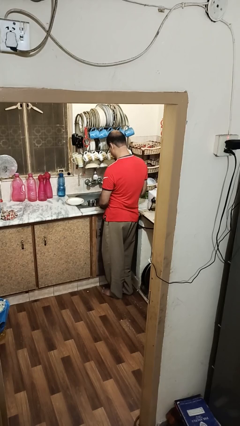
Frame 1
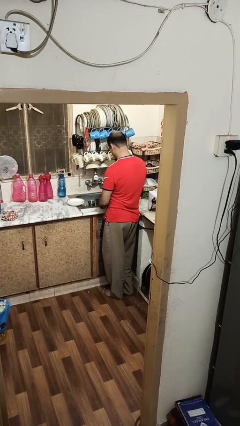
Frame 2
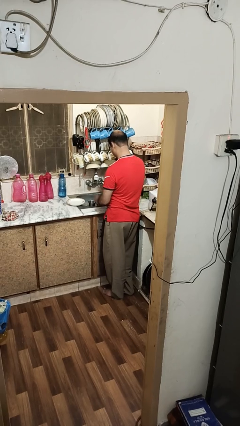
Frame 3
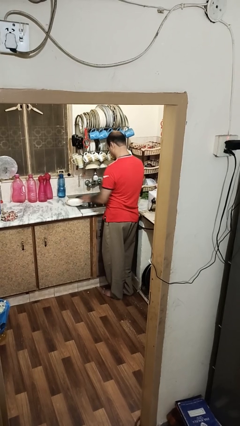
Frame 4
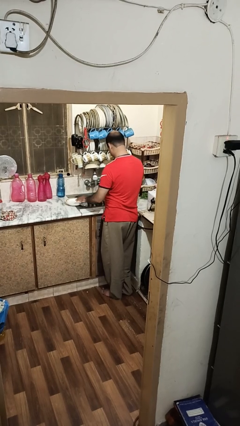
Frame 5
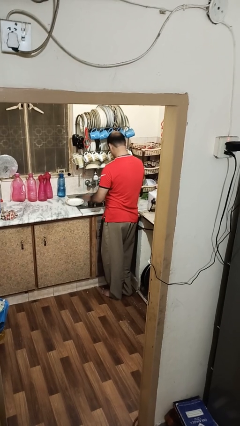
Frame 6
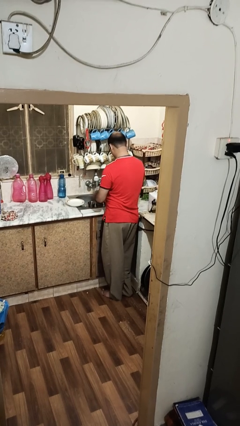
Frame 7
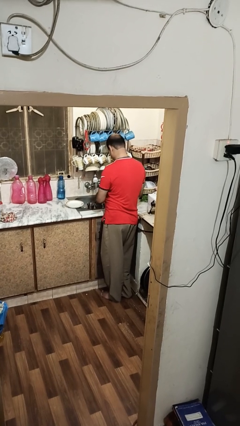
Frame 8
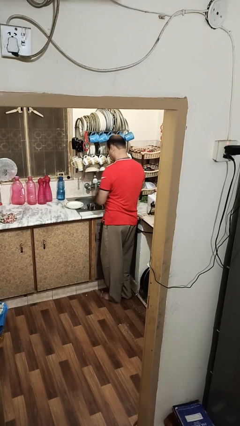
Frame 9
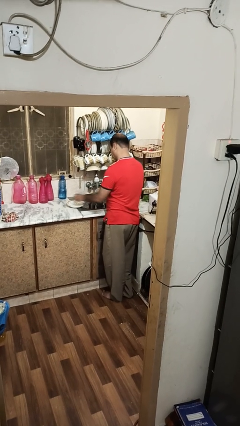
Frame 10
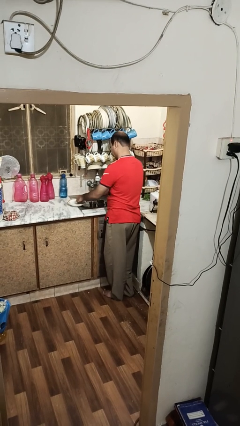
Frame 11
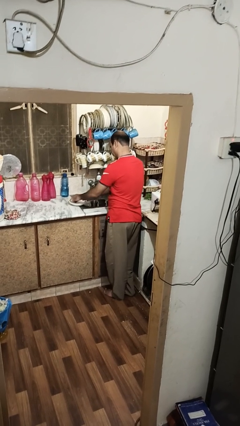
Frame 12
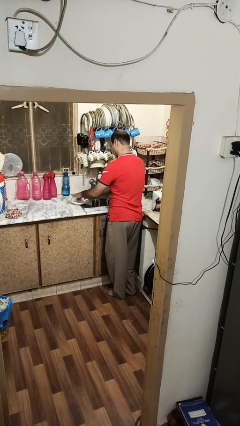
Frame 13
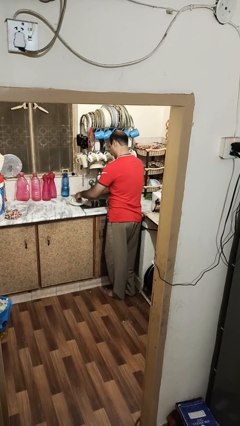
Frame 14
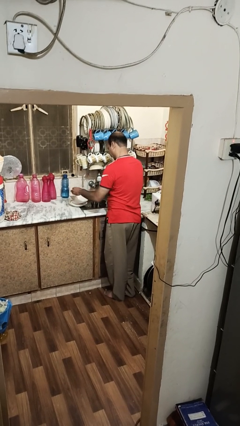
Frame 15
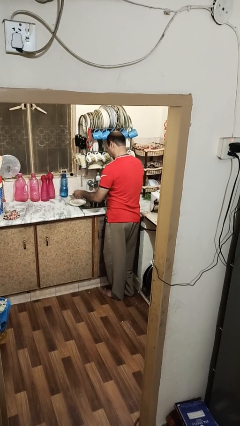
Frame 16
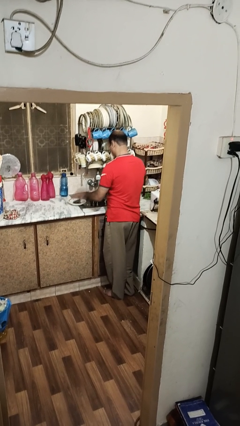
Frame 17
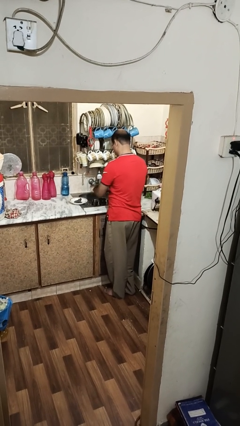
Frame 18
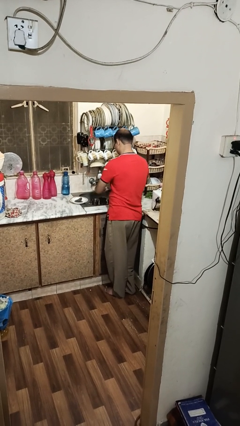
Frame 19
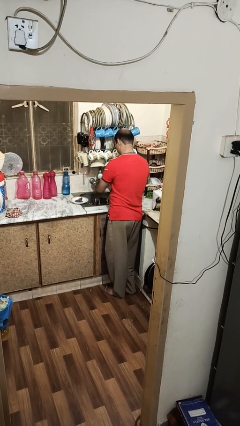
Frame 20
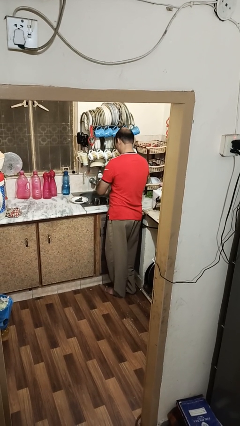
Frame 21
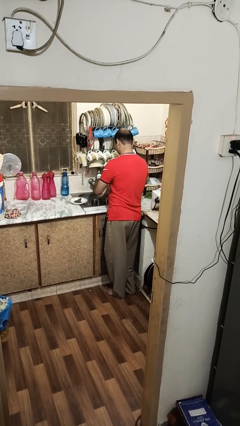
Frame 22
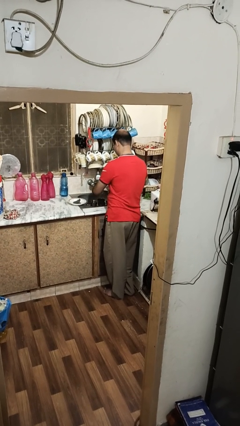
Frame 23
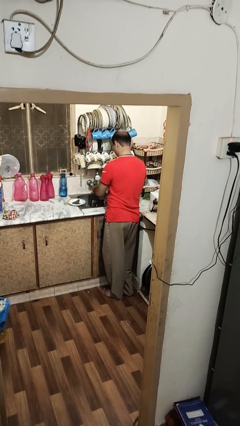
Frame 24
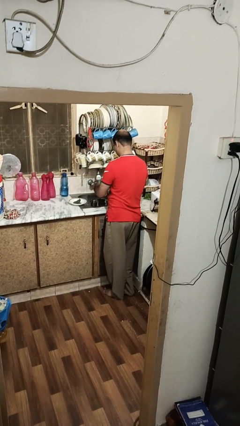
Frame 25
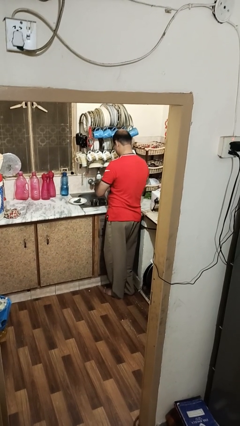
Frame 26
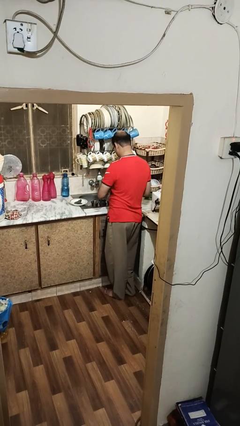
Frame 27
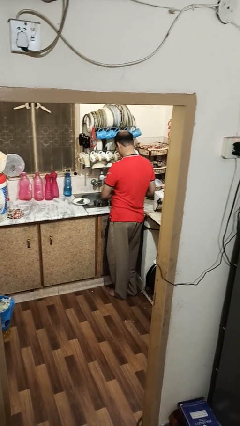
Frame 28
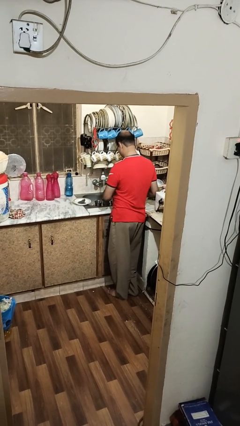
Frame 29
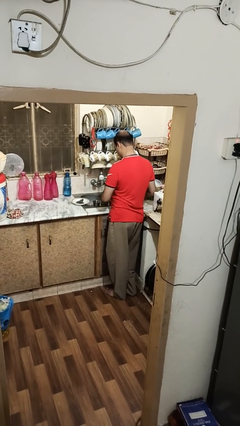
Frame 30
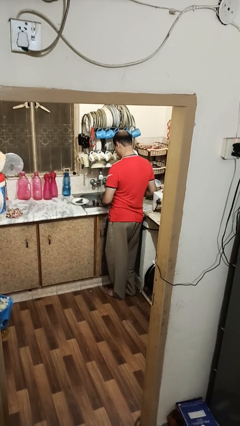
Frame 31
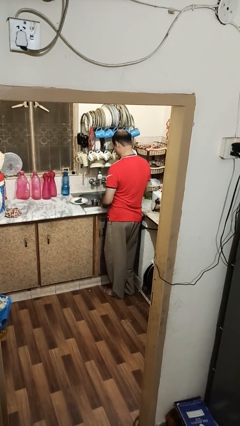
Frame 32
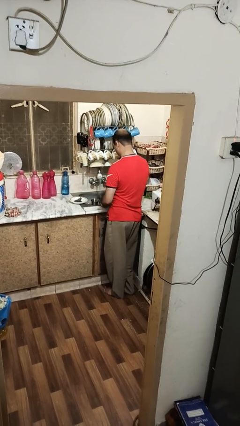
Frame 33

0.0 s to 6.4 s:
person washes dish

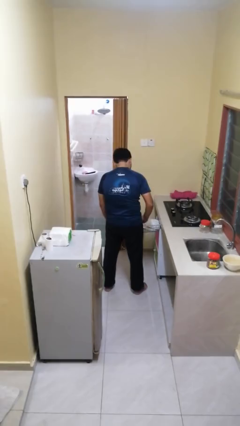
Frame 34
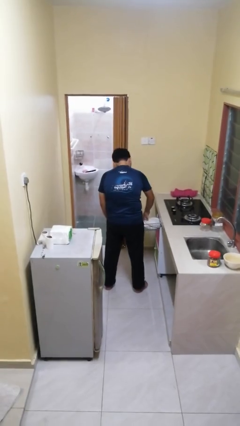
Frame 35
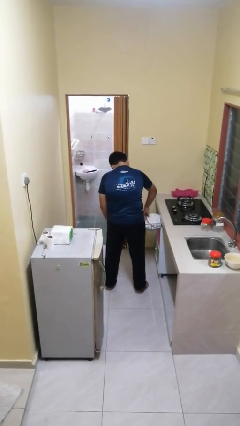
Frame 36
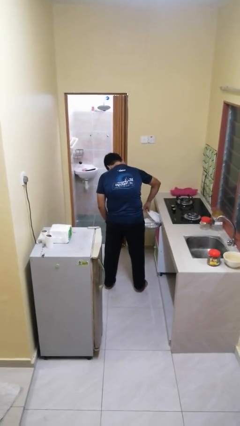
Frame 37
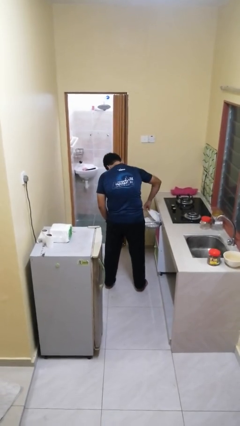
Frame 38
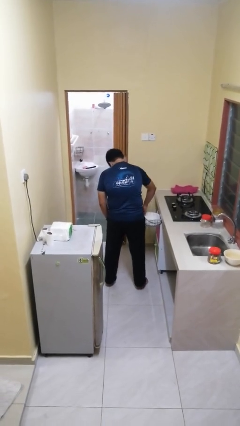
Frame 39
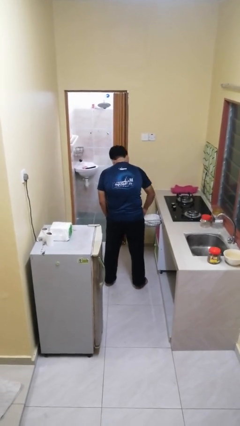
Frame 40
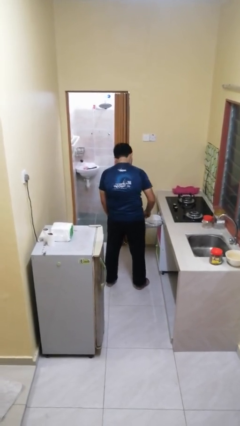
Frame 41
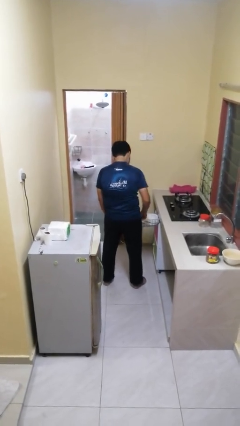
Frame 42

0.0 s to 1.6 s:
person searches in kitchen drawer

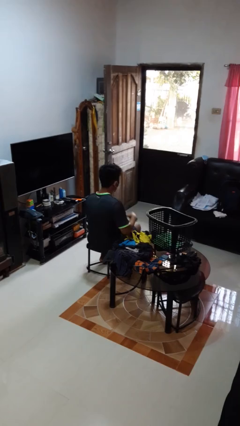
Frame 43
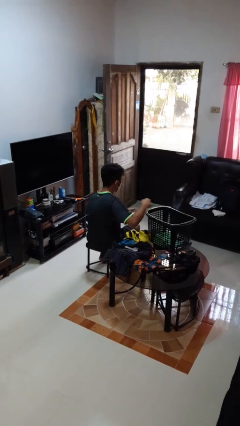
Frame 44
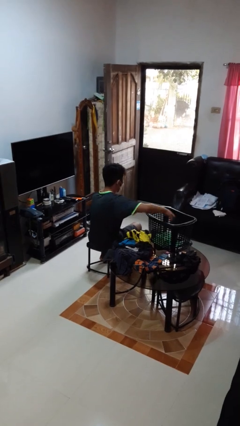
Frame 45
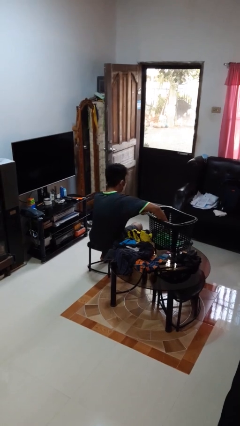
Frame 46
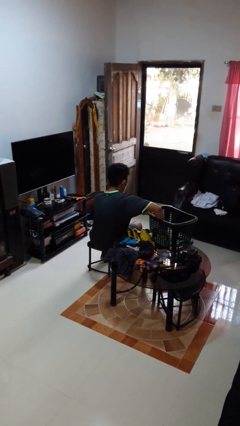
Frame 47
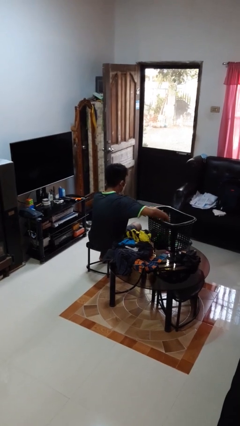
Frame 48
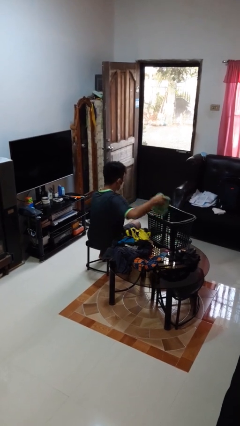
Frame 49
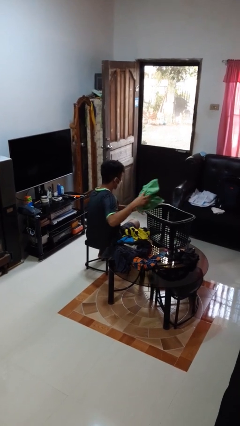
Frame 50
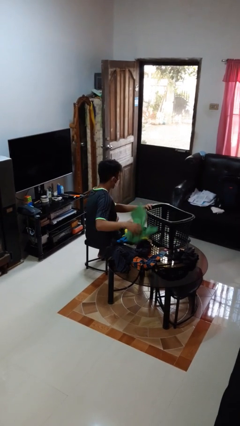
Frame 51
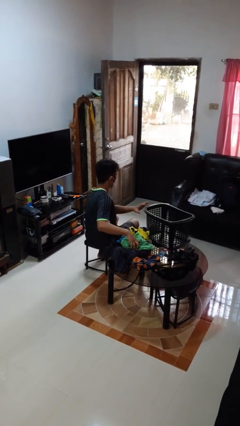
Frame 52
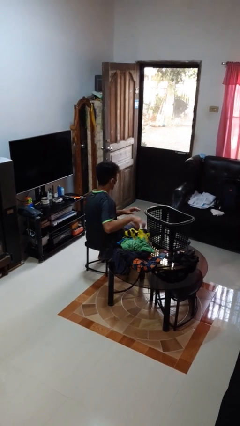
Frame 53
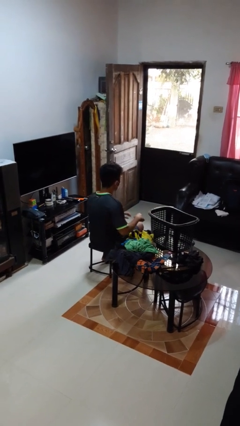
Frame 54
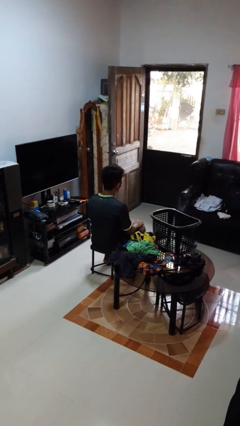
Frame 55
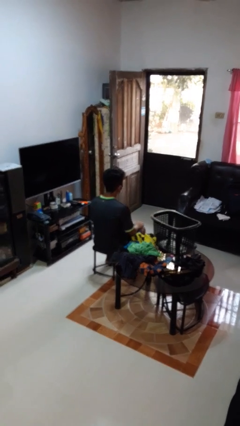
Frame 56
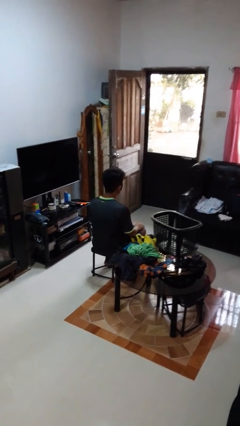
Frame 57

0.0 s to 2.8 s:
person takes object from basket

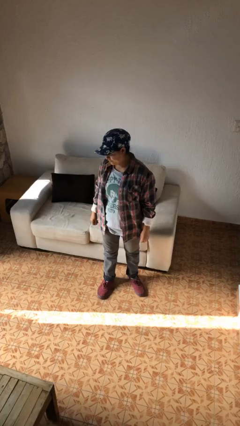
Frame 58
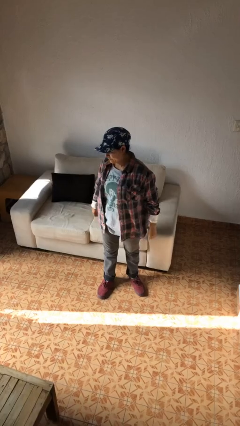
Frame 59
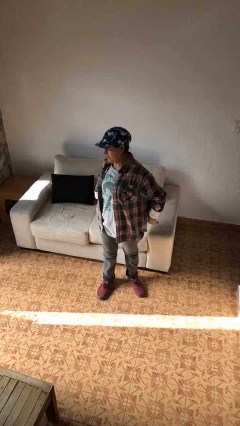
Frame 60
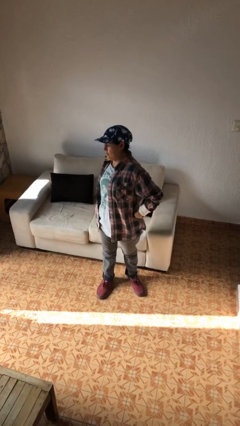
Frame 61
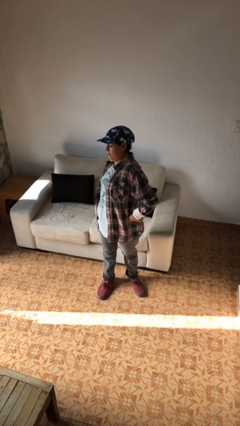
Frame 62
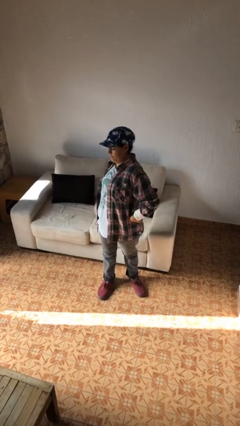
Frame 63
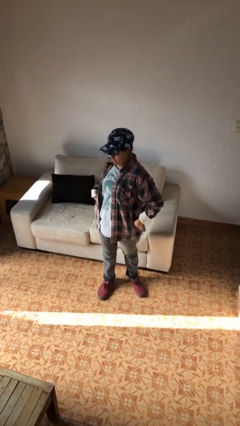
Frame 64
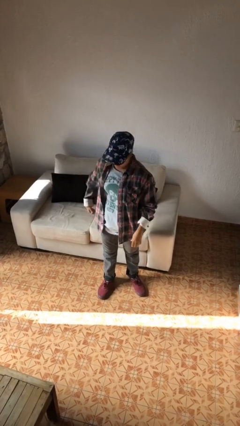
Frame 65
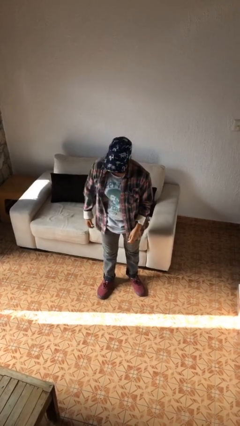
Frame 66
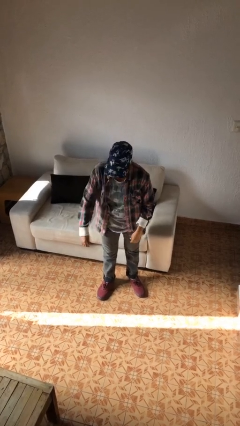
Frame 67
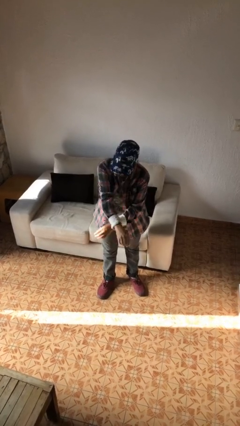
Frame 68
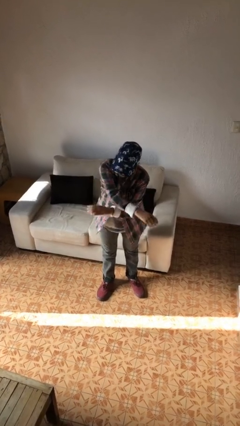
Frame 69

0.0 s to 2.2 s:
person stretches back

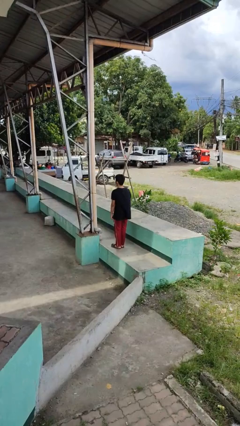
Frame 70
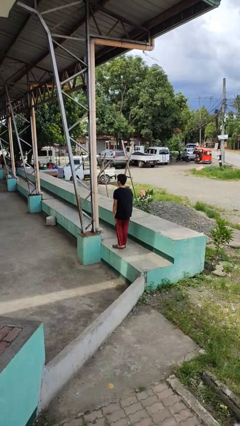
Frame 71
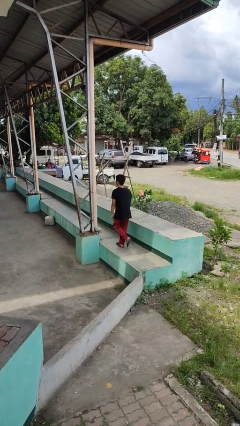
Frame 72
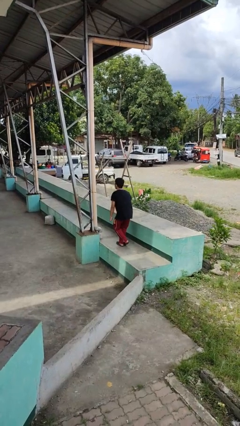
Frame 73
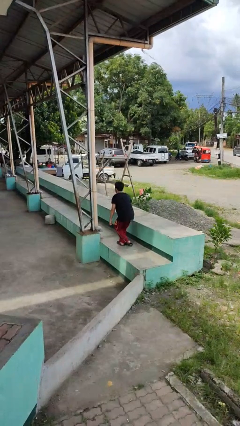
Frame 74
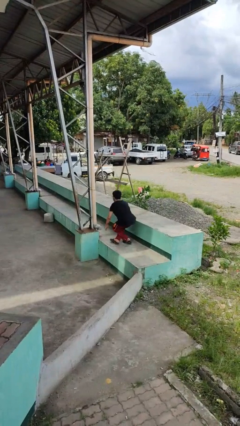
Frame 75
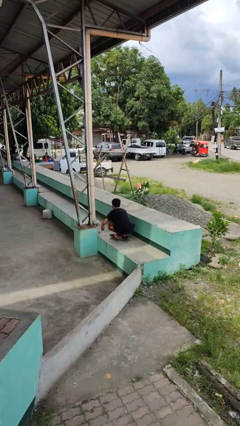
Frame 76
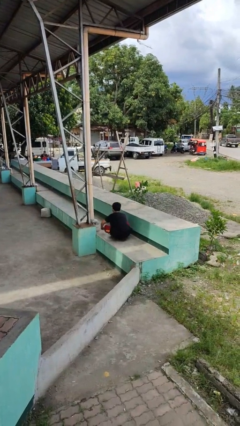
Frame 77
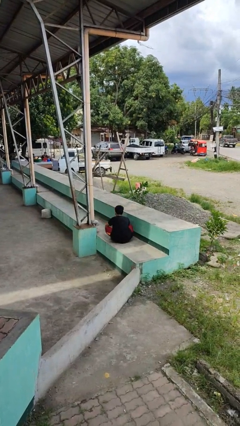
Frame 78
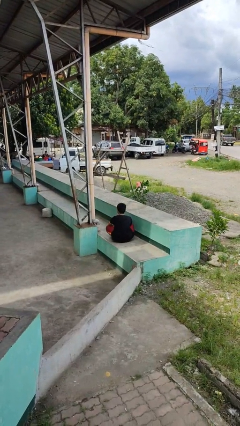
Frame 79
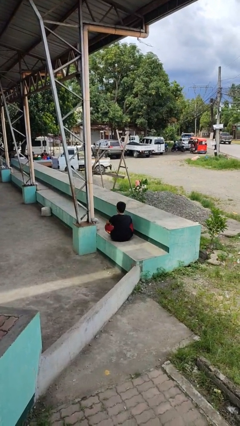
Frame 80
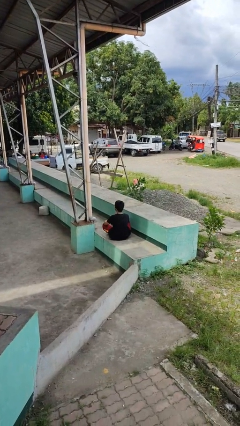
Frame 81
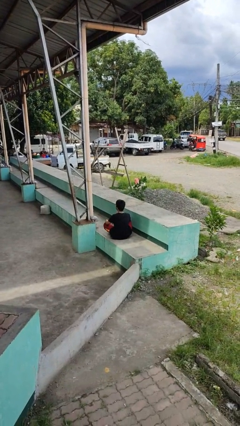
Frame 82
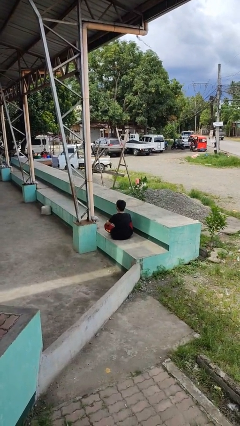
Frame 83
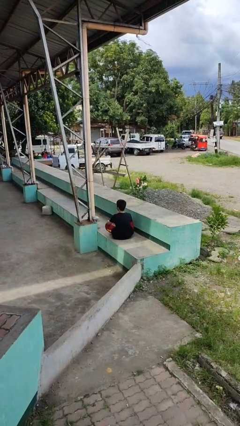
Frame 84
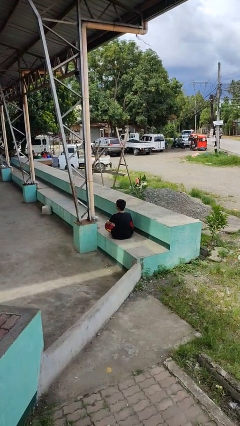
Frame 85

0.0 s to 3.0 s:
person sits crisscross

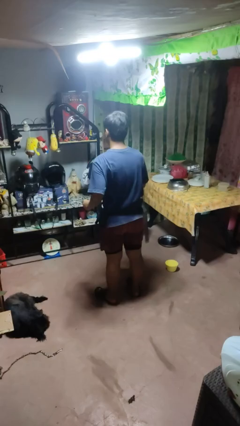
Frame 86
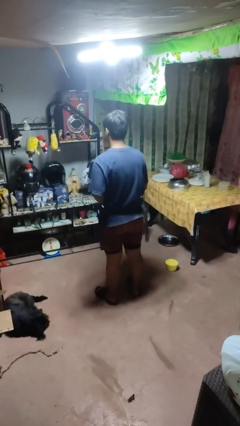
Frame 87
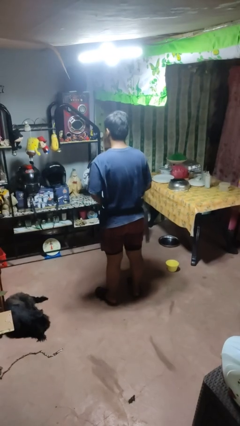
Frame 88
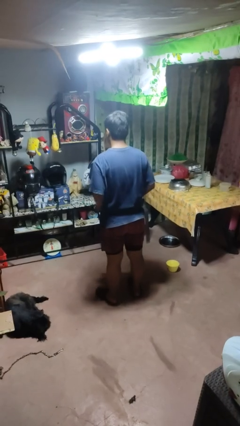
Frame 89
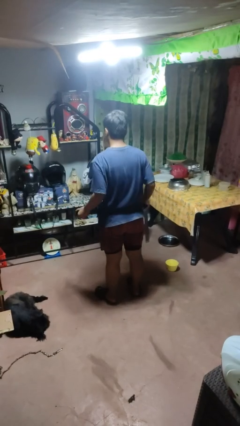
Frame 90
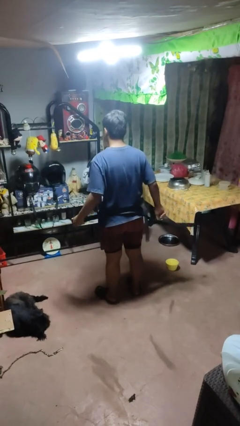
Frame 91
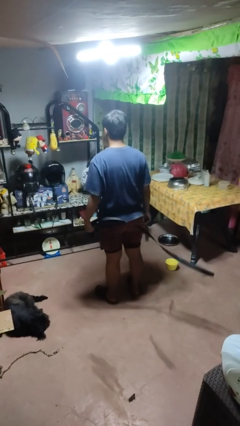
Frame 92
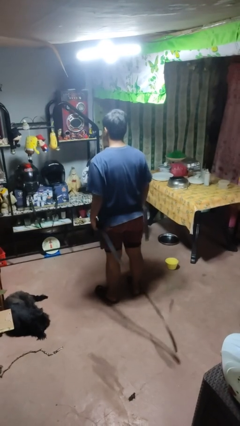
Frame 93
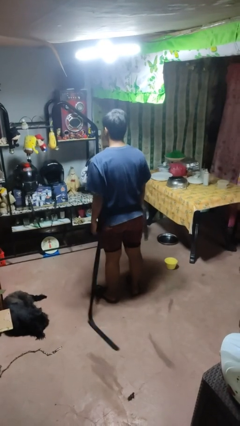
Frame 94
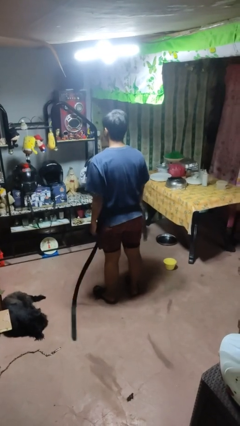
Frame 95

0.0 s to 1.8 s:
person takes off belt

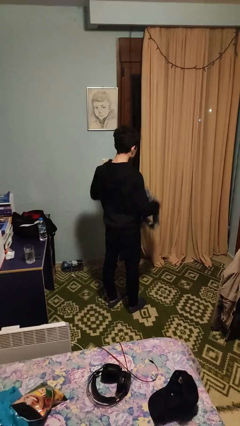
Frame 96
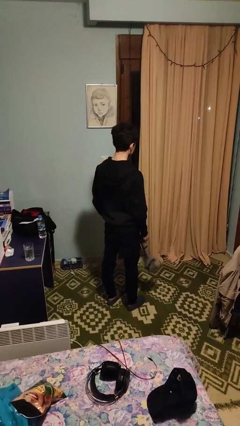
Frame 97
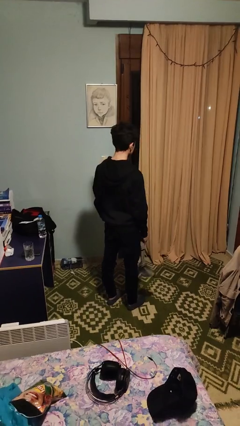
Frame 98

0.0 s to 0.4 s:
person takes off scarf
